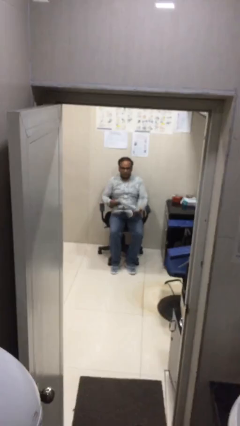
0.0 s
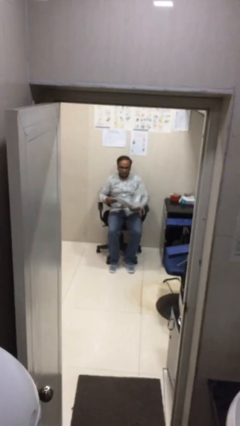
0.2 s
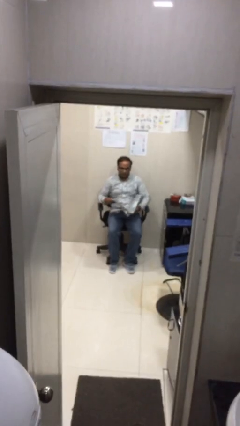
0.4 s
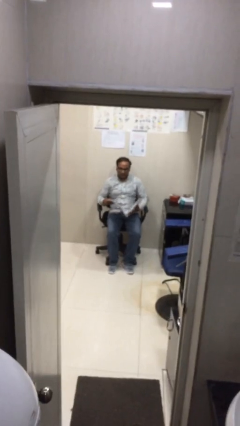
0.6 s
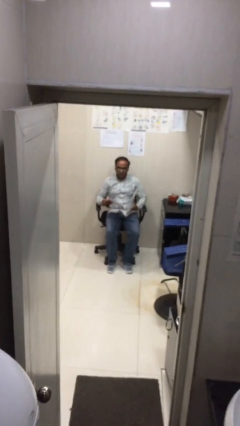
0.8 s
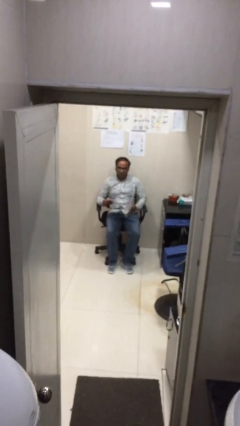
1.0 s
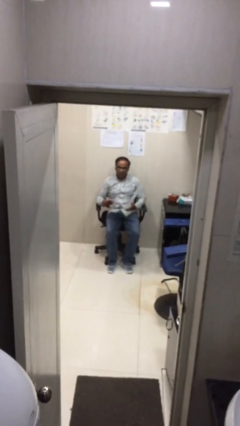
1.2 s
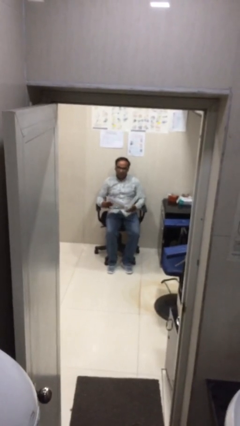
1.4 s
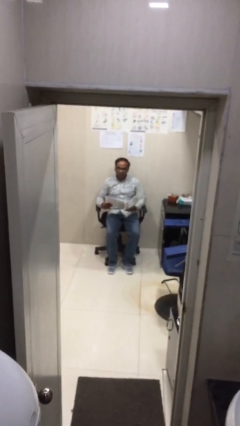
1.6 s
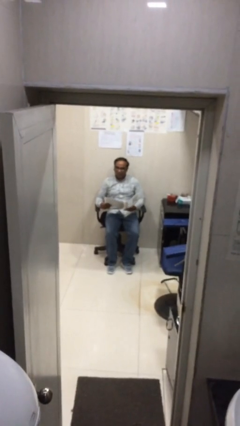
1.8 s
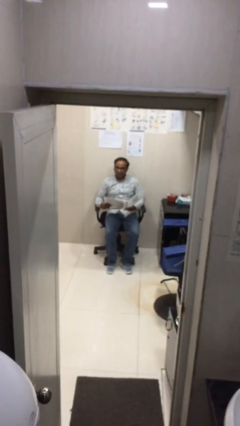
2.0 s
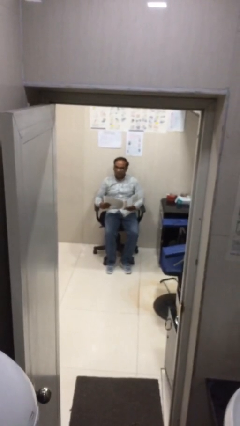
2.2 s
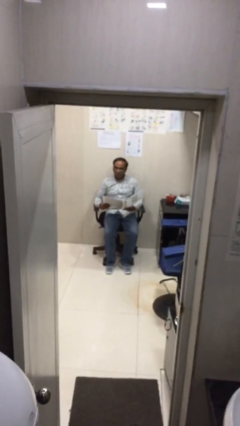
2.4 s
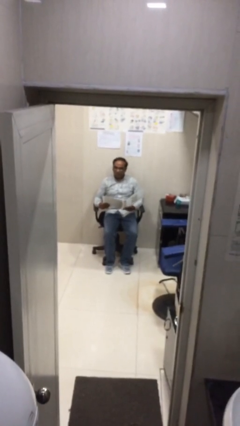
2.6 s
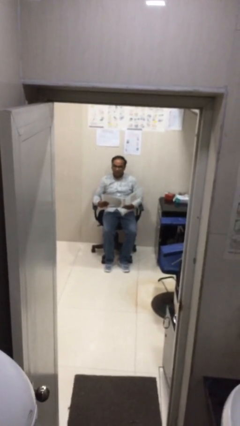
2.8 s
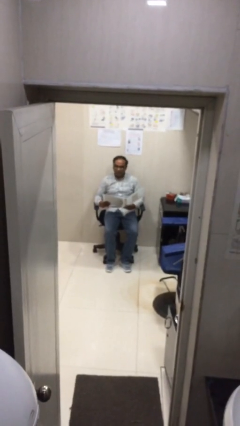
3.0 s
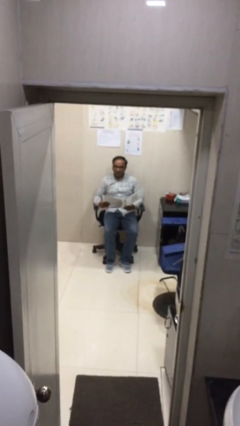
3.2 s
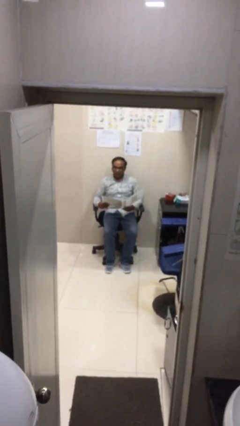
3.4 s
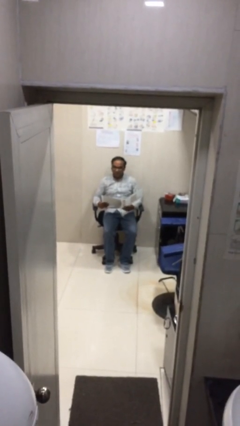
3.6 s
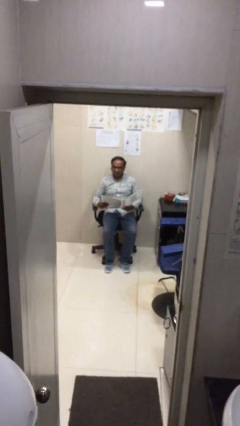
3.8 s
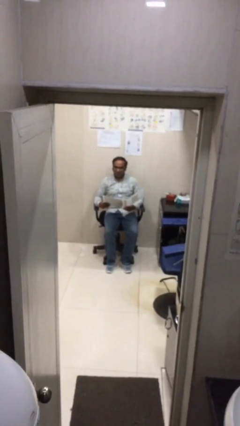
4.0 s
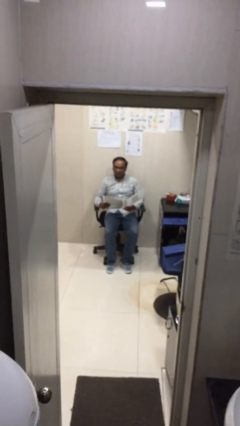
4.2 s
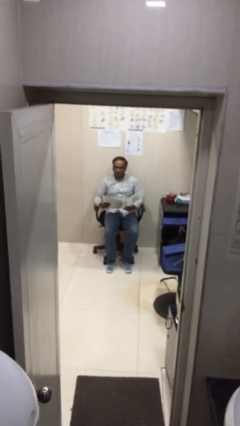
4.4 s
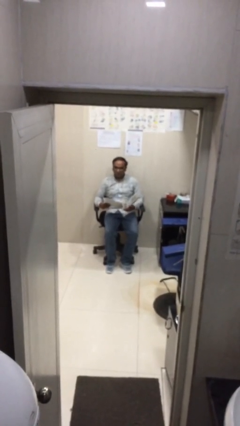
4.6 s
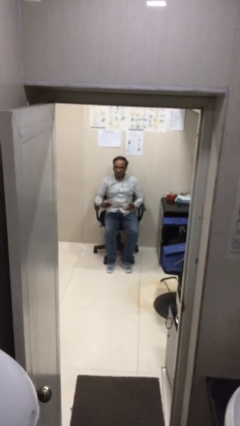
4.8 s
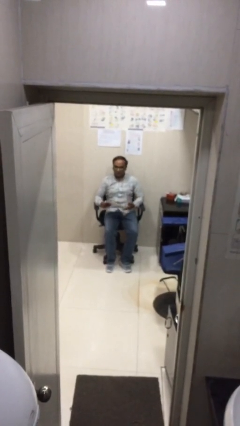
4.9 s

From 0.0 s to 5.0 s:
person reads document

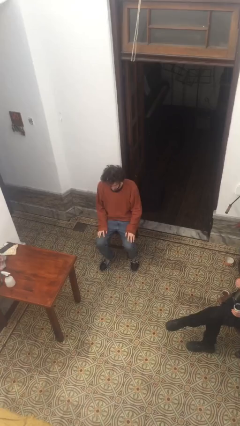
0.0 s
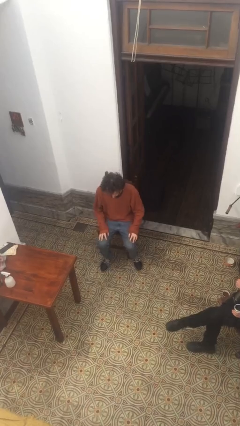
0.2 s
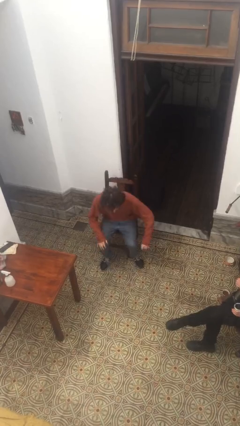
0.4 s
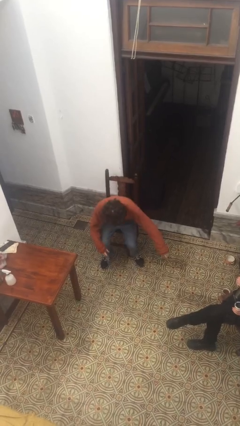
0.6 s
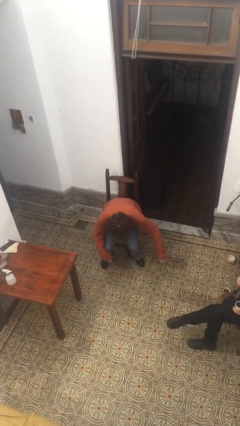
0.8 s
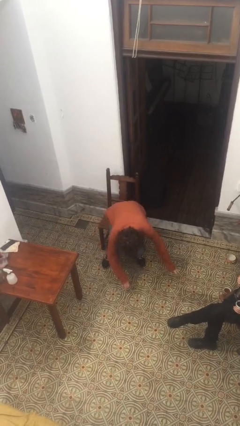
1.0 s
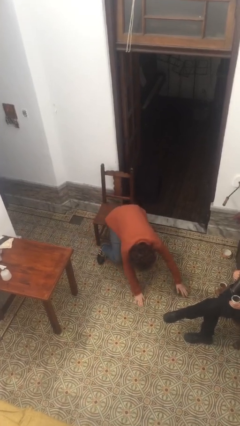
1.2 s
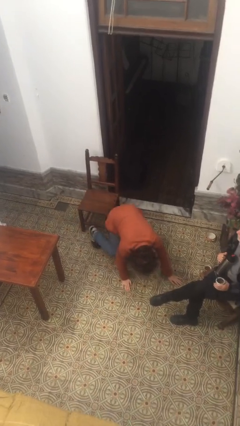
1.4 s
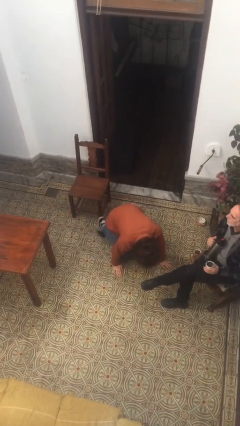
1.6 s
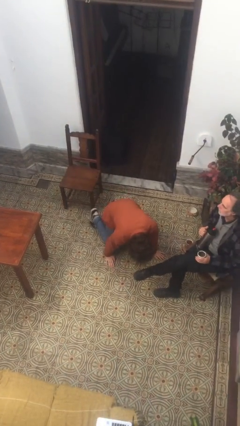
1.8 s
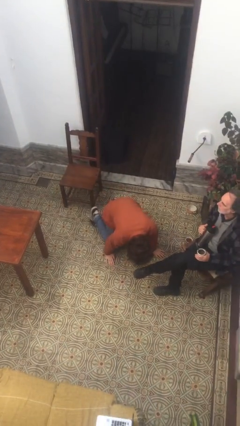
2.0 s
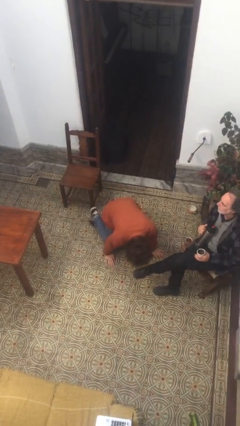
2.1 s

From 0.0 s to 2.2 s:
person falls from chair

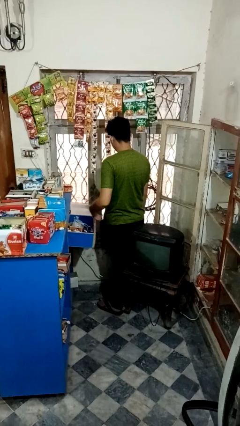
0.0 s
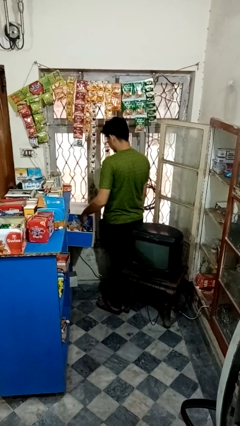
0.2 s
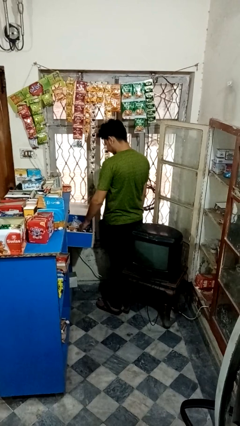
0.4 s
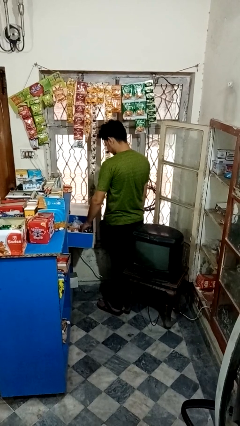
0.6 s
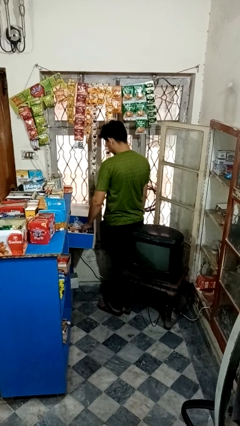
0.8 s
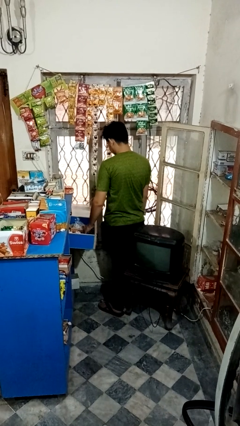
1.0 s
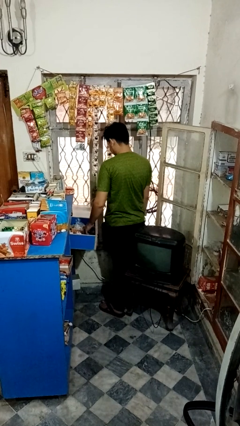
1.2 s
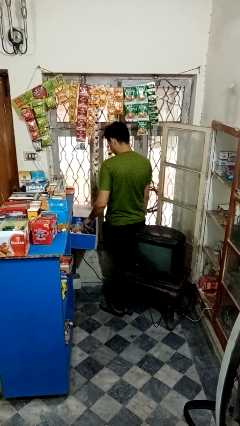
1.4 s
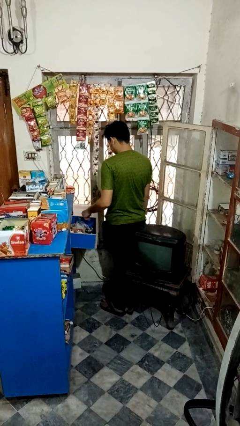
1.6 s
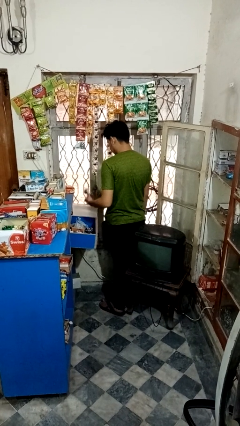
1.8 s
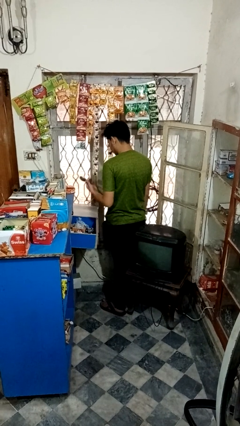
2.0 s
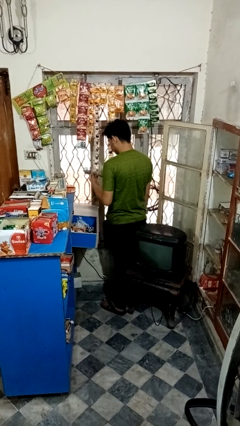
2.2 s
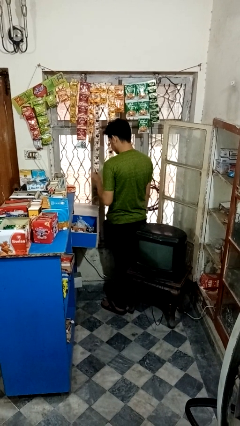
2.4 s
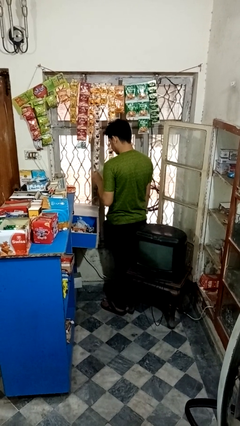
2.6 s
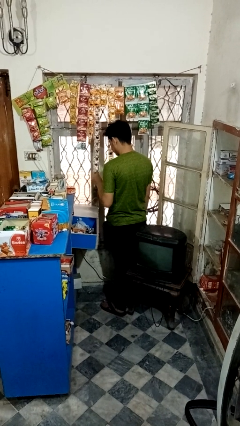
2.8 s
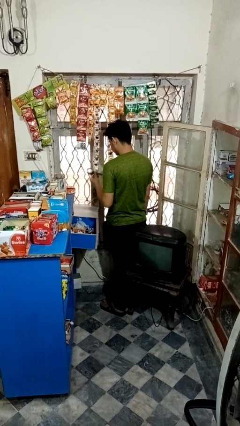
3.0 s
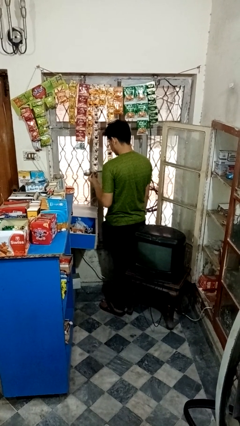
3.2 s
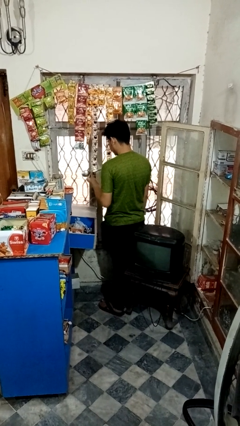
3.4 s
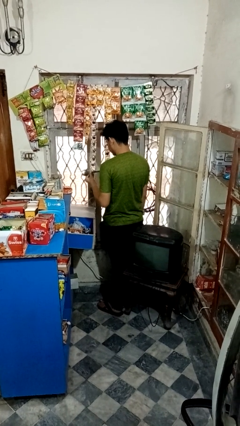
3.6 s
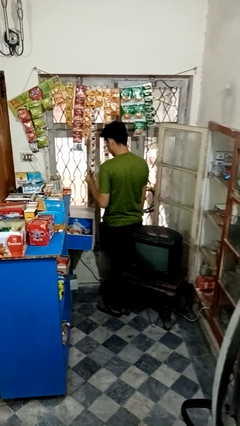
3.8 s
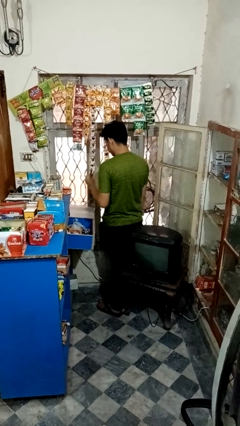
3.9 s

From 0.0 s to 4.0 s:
person searches in kitchen drawer

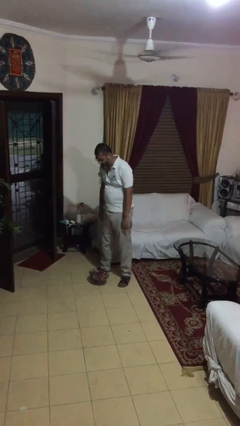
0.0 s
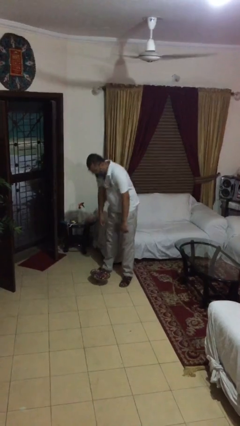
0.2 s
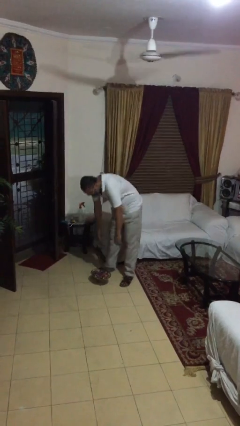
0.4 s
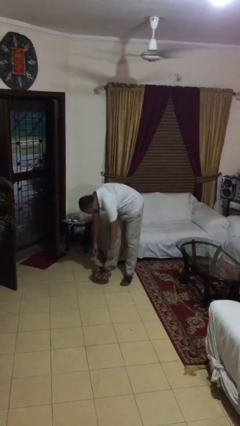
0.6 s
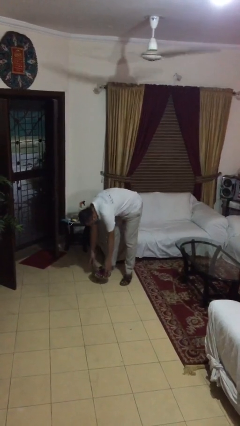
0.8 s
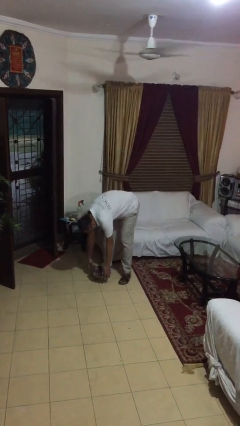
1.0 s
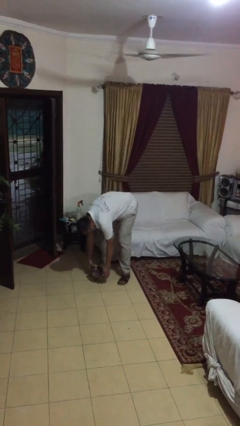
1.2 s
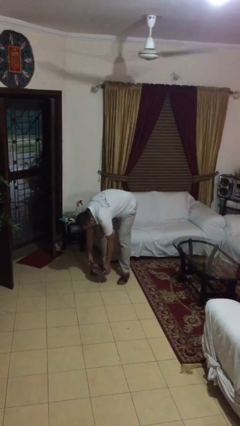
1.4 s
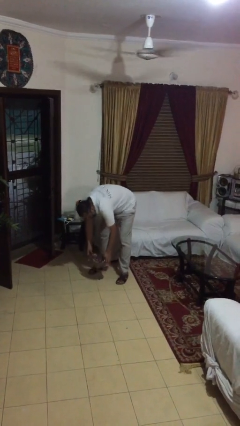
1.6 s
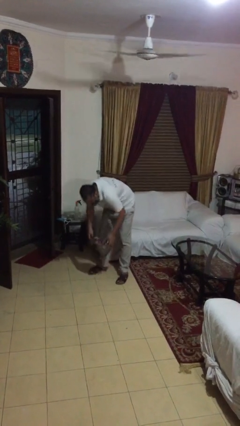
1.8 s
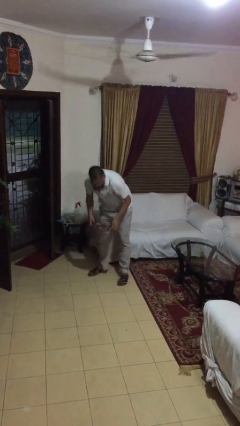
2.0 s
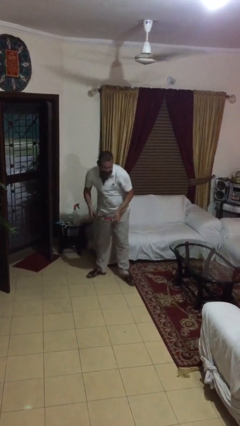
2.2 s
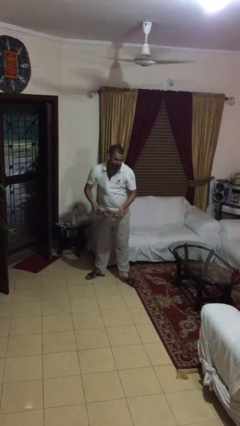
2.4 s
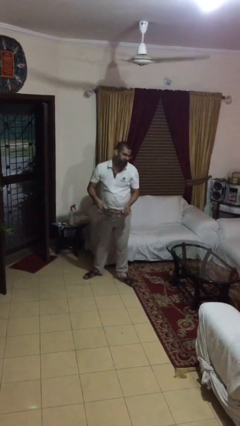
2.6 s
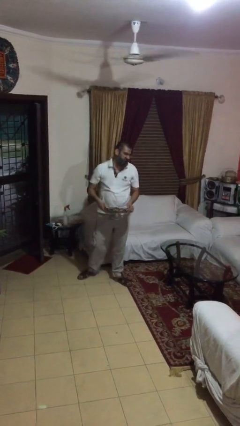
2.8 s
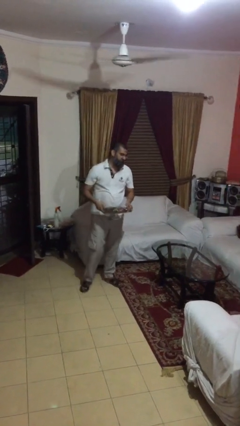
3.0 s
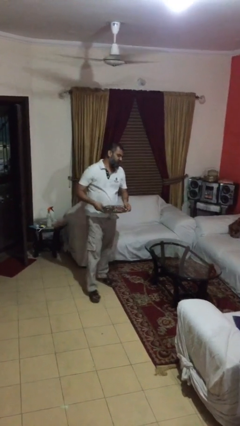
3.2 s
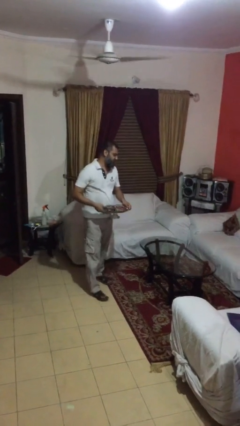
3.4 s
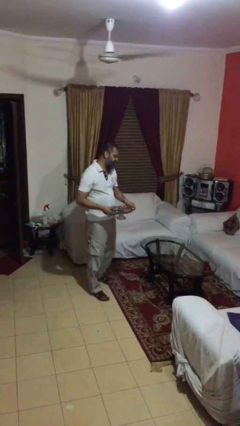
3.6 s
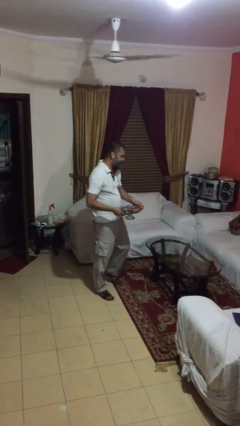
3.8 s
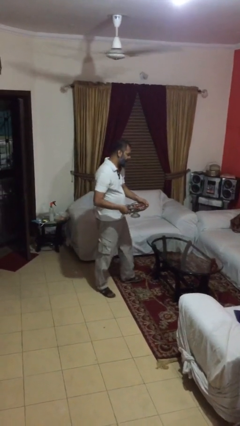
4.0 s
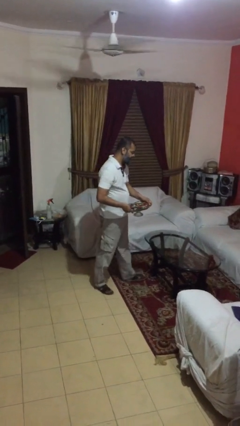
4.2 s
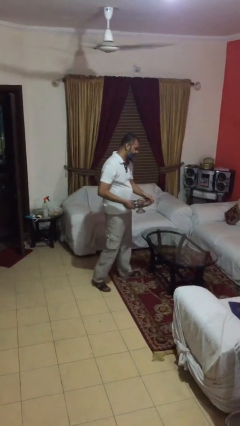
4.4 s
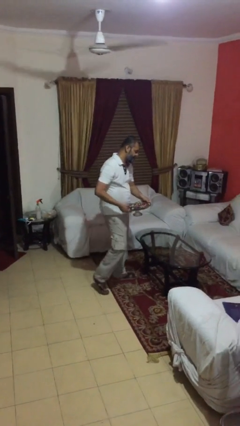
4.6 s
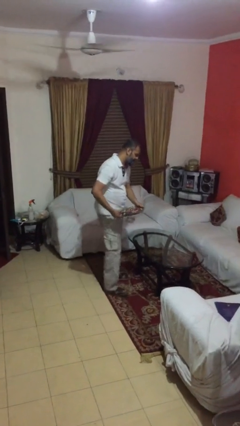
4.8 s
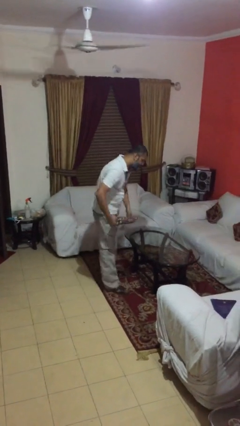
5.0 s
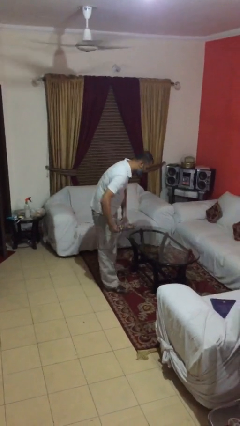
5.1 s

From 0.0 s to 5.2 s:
person picks up object from floor

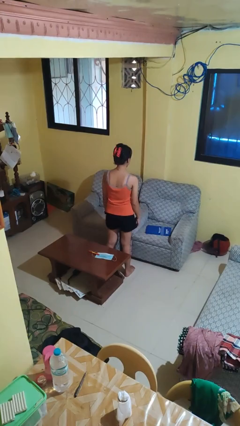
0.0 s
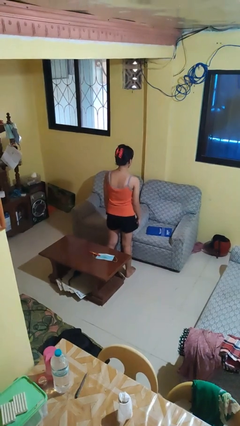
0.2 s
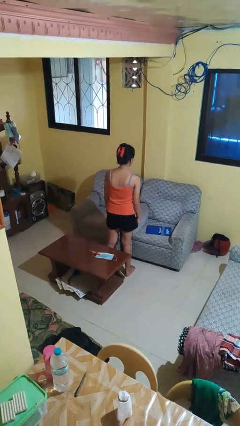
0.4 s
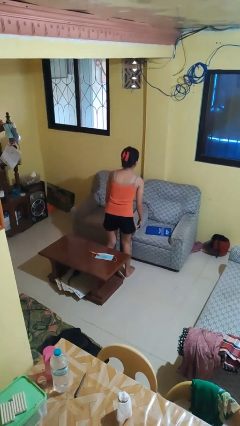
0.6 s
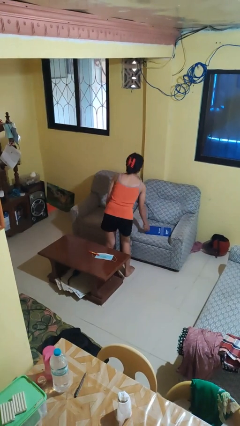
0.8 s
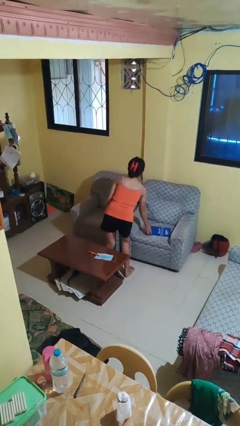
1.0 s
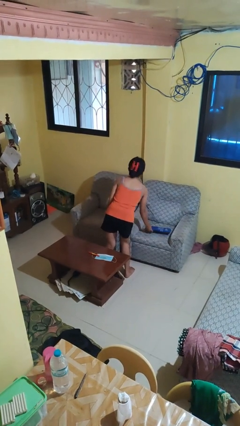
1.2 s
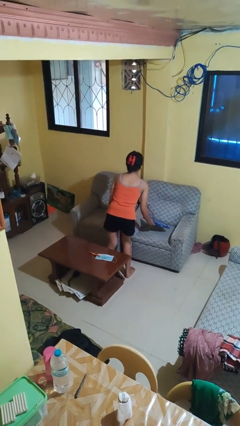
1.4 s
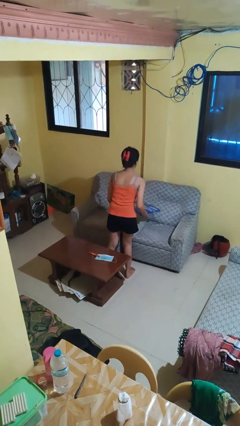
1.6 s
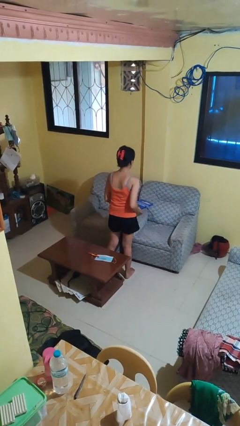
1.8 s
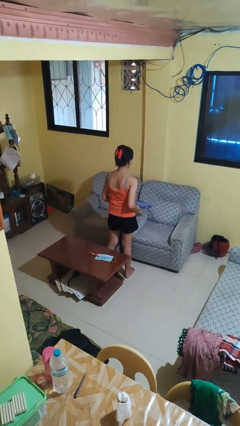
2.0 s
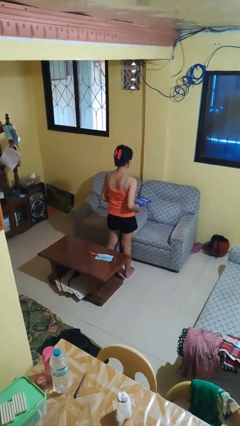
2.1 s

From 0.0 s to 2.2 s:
person picks up object from couch
